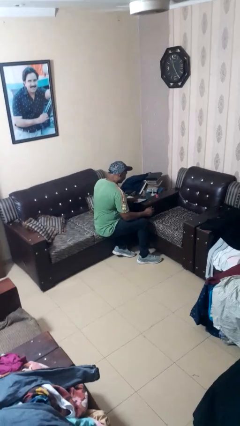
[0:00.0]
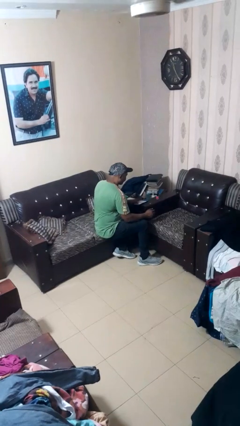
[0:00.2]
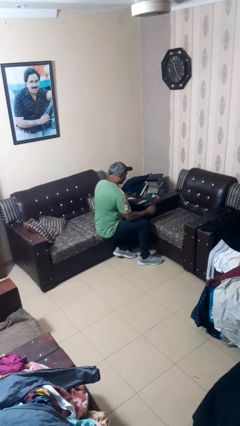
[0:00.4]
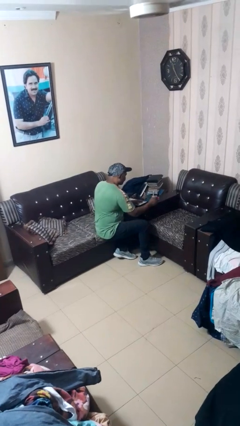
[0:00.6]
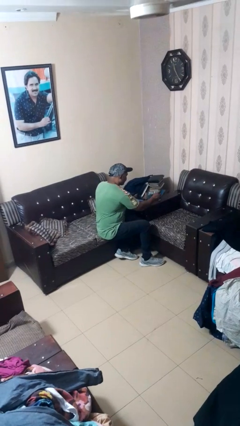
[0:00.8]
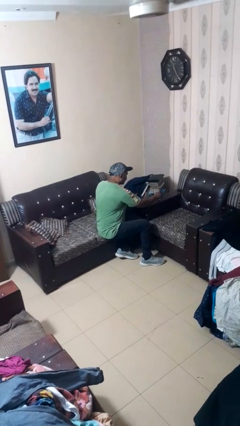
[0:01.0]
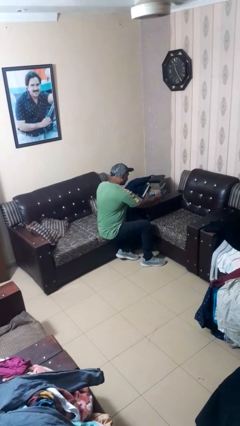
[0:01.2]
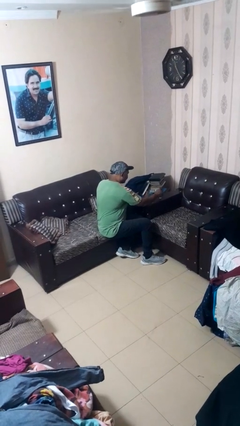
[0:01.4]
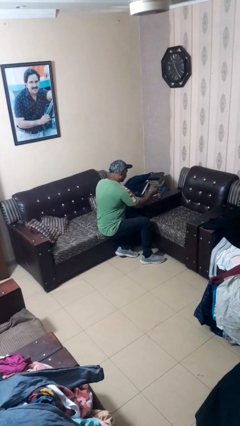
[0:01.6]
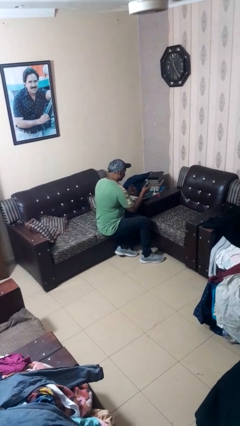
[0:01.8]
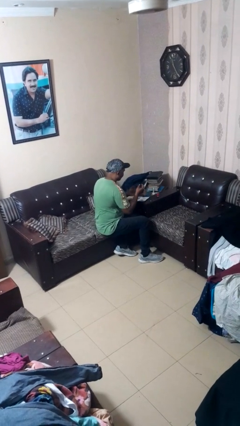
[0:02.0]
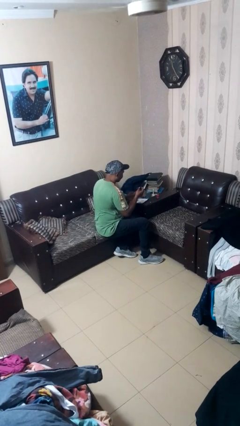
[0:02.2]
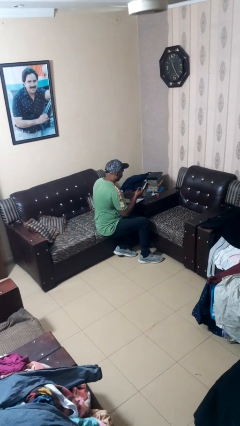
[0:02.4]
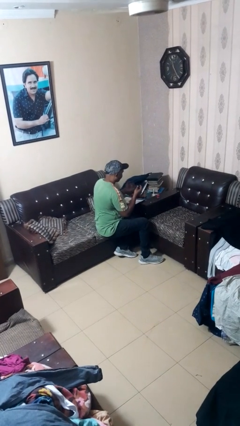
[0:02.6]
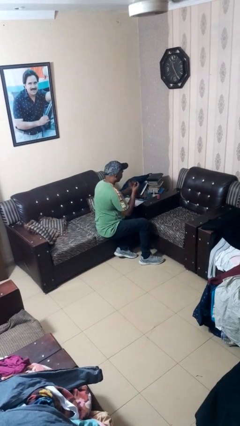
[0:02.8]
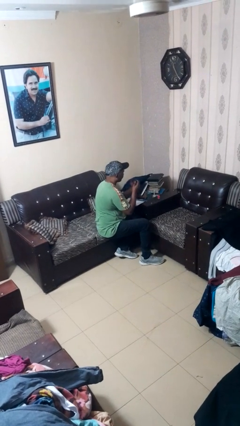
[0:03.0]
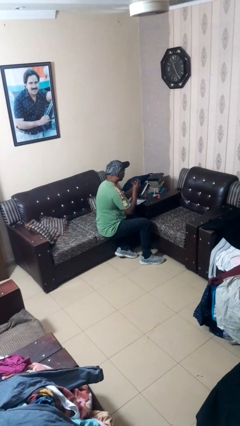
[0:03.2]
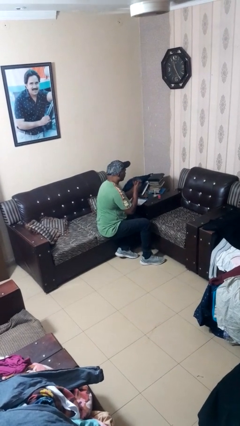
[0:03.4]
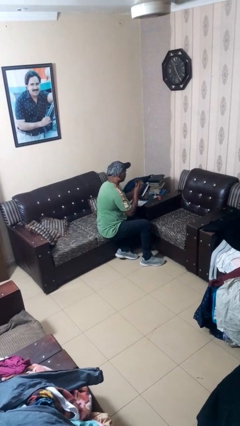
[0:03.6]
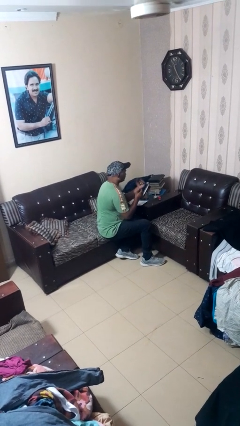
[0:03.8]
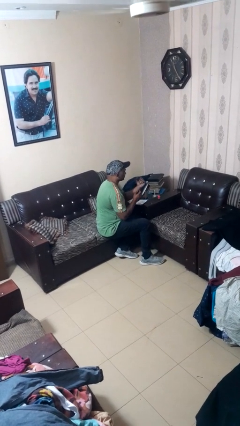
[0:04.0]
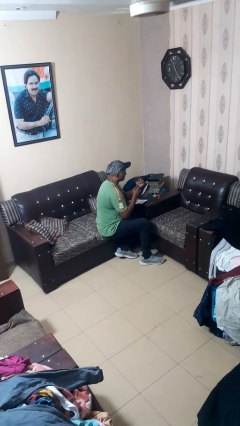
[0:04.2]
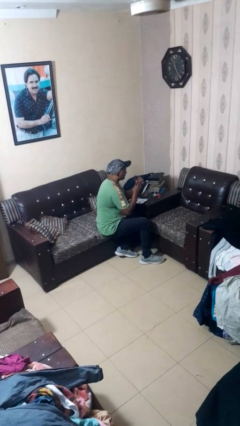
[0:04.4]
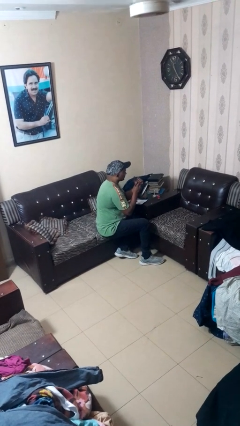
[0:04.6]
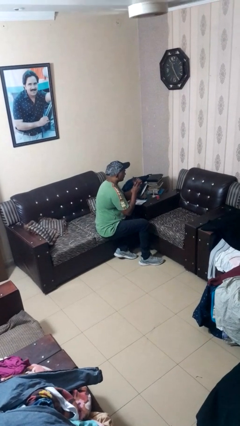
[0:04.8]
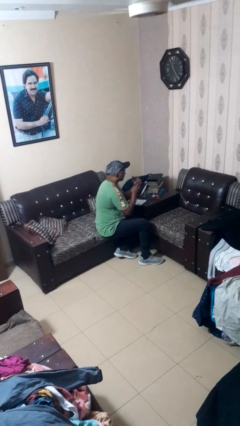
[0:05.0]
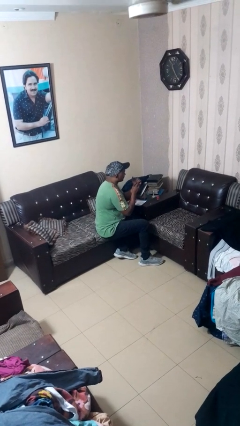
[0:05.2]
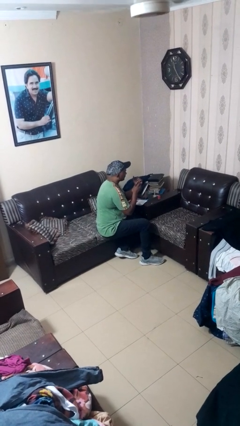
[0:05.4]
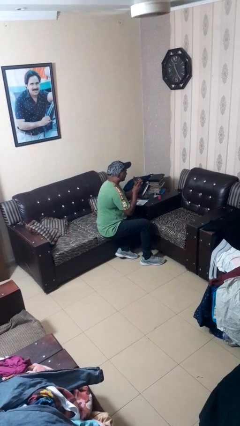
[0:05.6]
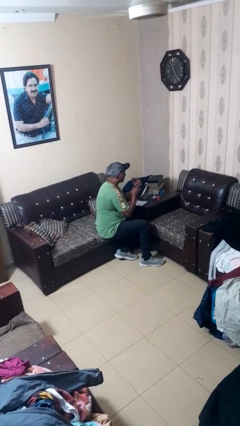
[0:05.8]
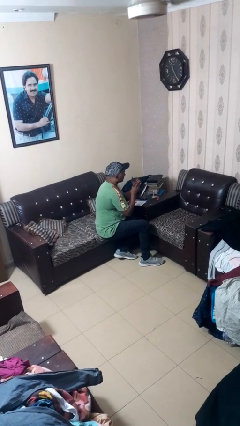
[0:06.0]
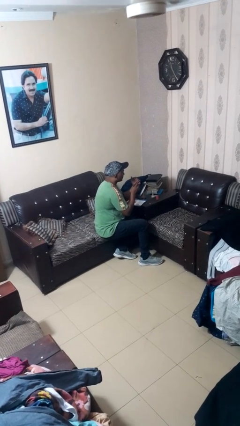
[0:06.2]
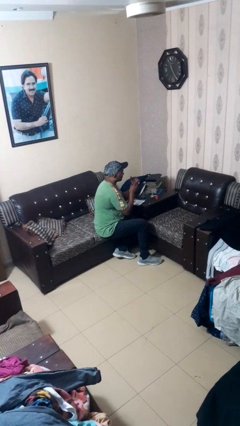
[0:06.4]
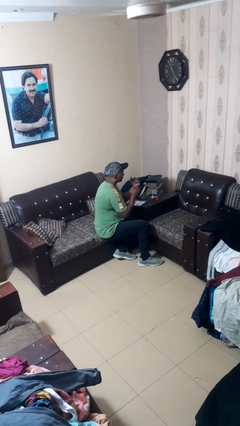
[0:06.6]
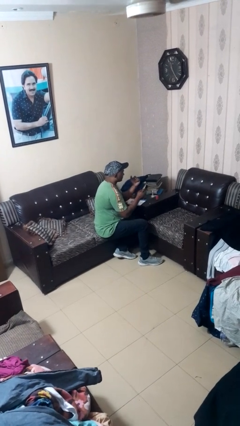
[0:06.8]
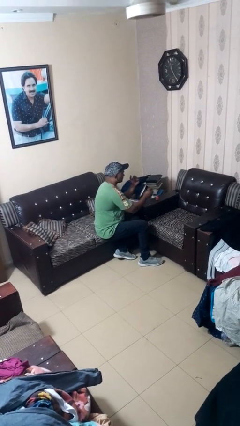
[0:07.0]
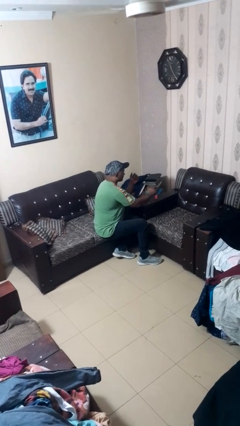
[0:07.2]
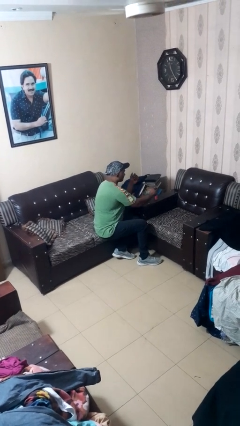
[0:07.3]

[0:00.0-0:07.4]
person paints fingernails

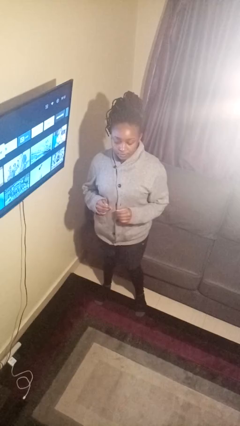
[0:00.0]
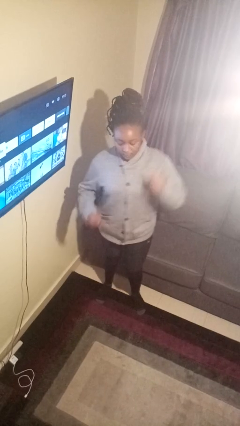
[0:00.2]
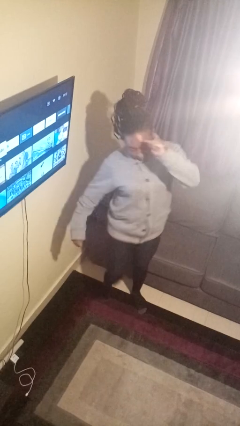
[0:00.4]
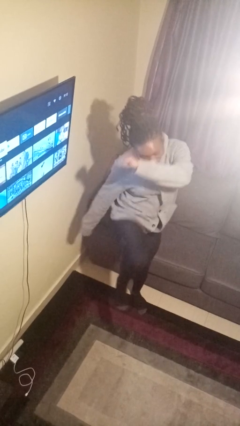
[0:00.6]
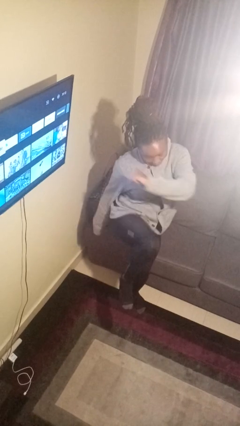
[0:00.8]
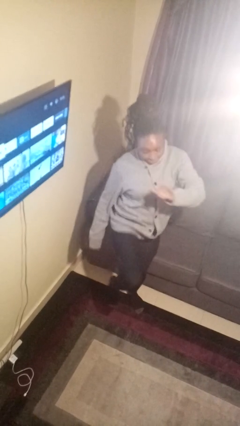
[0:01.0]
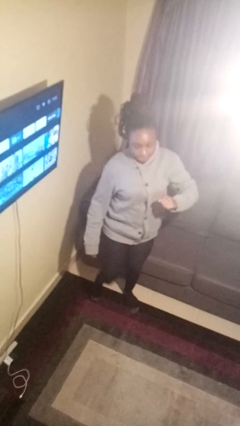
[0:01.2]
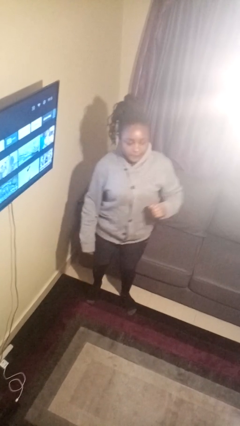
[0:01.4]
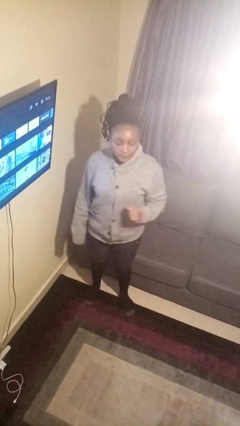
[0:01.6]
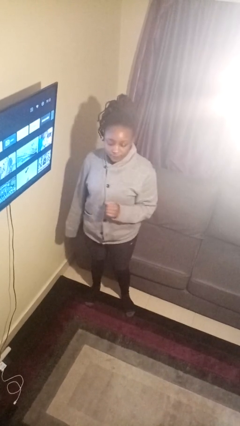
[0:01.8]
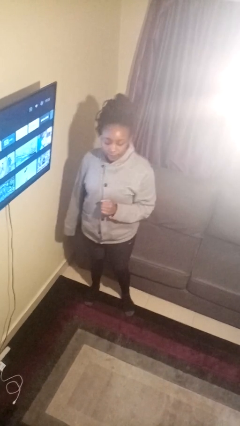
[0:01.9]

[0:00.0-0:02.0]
person karate kicks

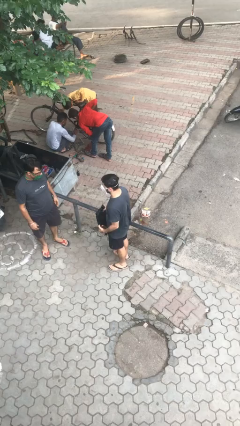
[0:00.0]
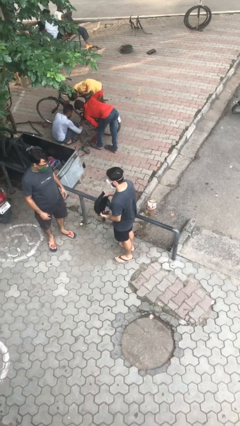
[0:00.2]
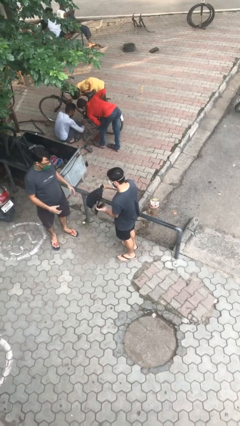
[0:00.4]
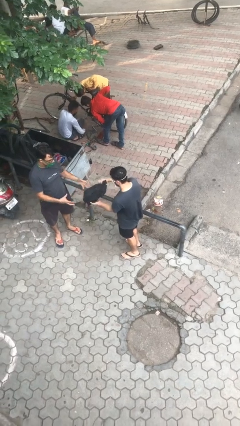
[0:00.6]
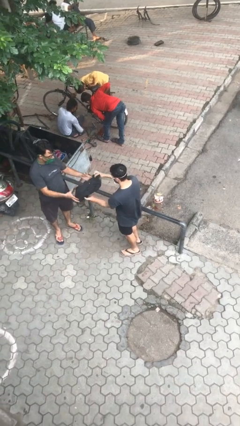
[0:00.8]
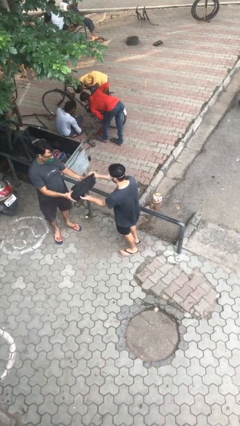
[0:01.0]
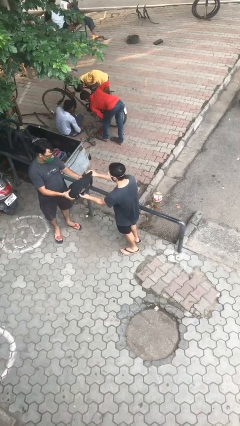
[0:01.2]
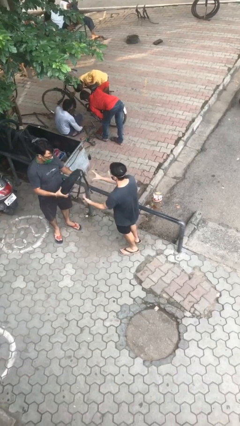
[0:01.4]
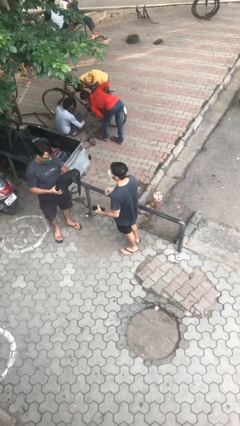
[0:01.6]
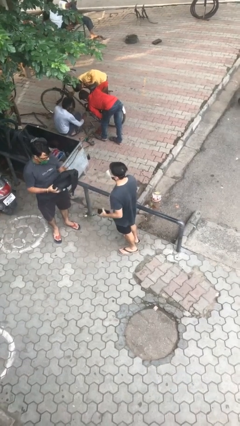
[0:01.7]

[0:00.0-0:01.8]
person transfers object to person

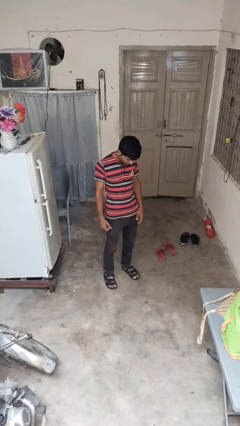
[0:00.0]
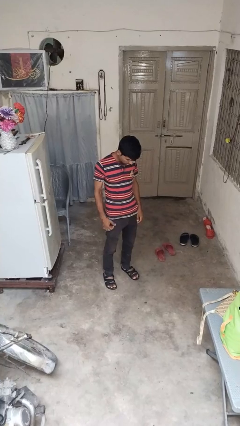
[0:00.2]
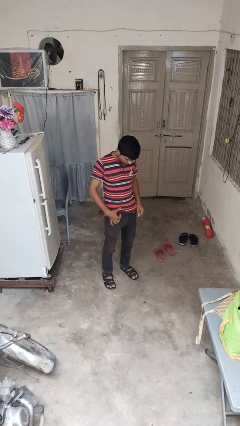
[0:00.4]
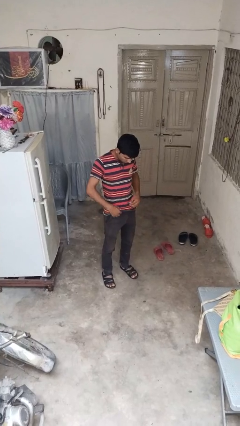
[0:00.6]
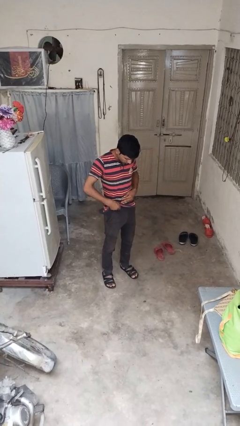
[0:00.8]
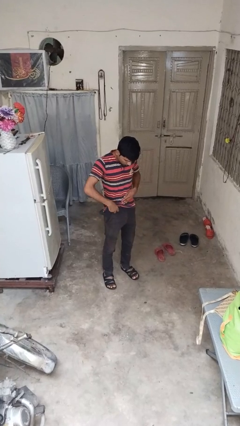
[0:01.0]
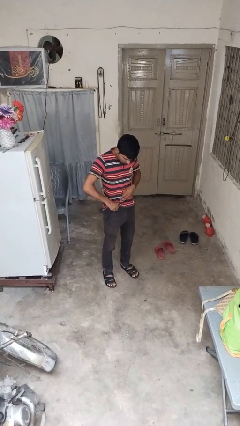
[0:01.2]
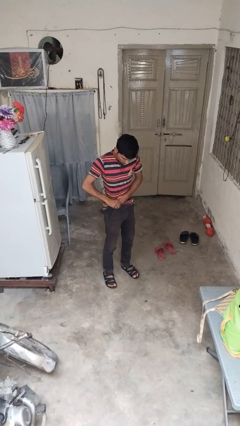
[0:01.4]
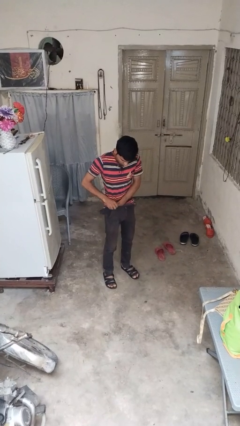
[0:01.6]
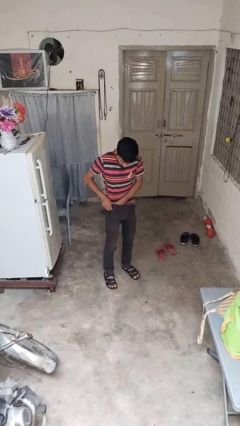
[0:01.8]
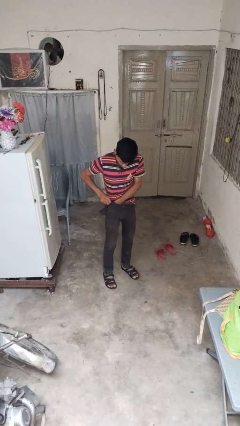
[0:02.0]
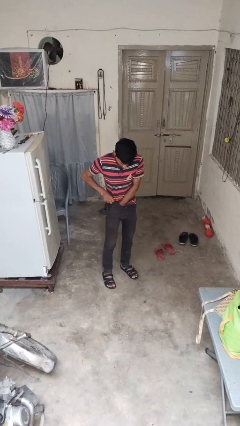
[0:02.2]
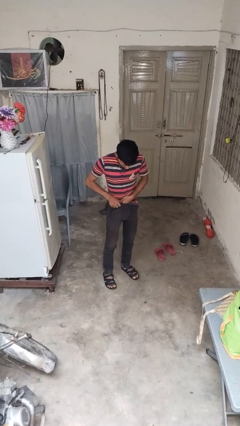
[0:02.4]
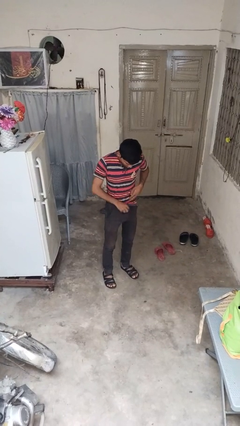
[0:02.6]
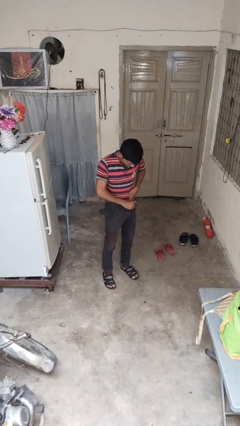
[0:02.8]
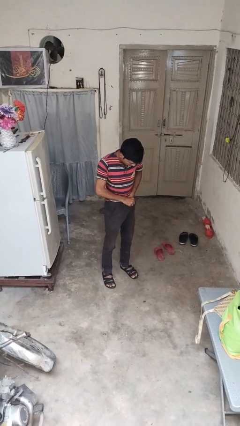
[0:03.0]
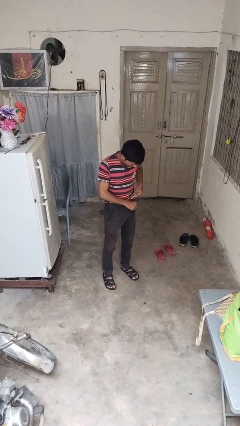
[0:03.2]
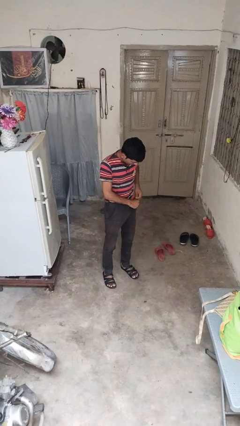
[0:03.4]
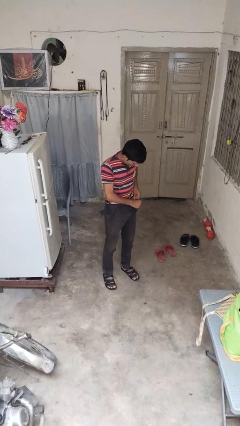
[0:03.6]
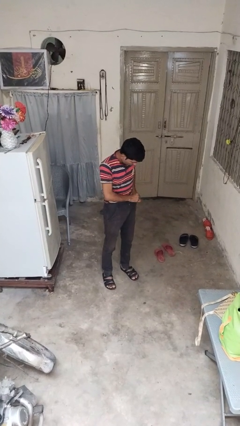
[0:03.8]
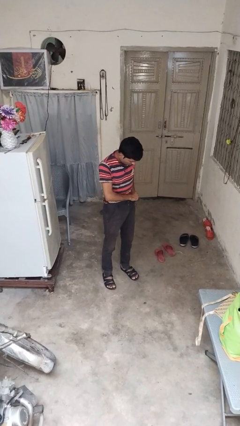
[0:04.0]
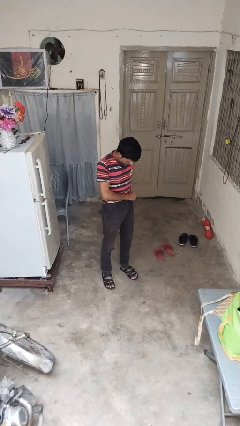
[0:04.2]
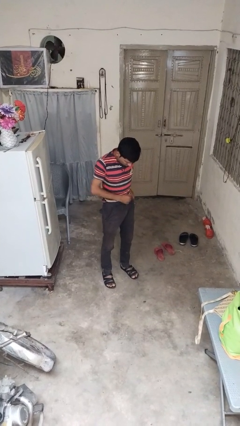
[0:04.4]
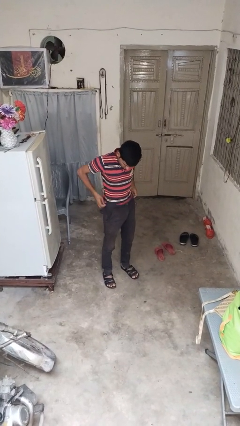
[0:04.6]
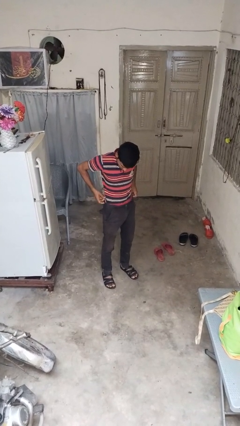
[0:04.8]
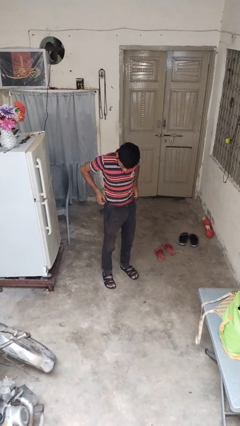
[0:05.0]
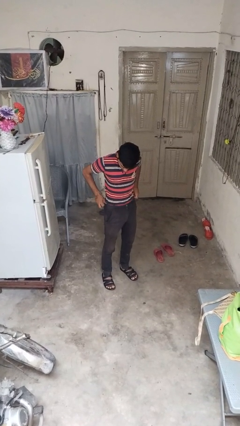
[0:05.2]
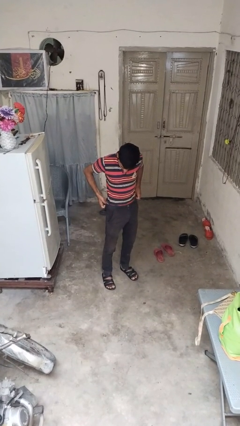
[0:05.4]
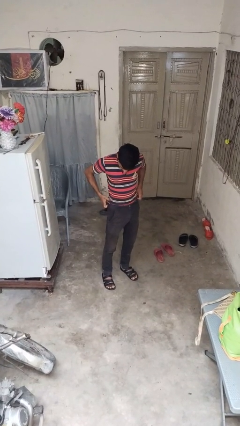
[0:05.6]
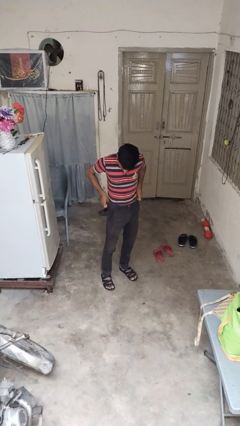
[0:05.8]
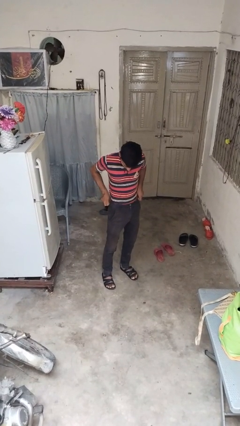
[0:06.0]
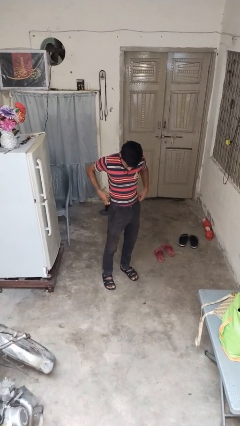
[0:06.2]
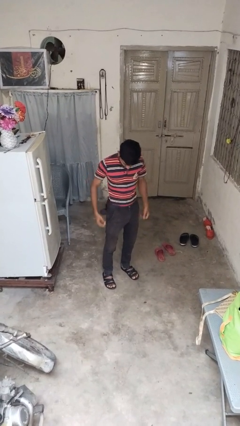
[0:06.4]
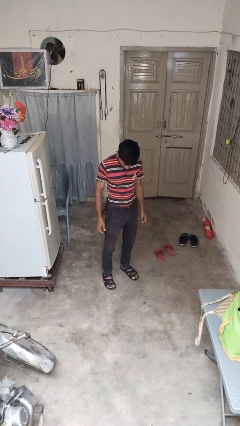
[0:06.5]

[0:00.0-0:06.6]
person tucks in shirt

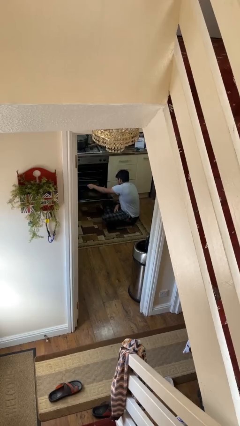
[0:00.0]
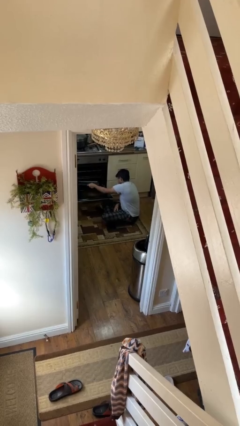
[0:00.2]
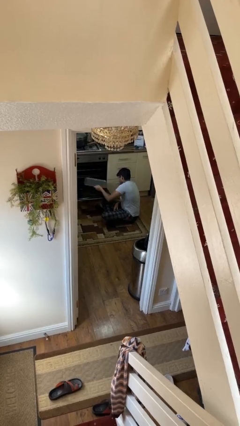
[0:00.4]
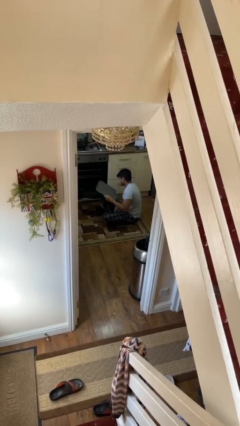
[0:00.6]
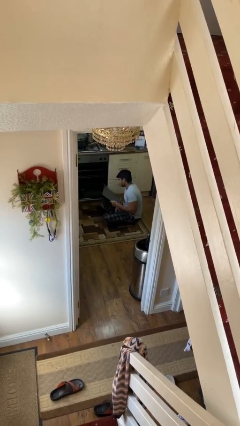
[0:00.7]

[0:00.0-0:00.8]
person takes object from oven
